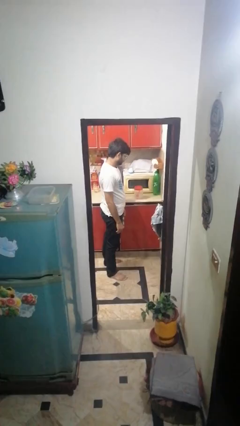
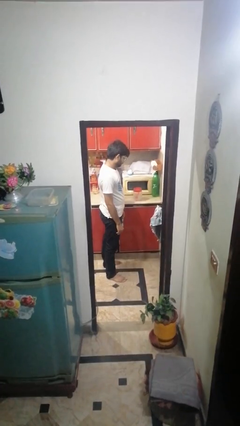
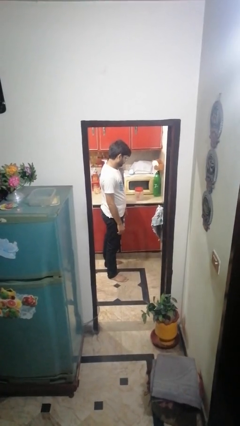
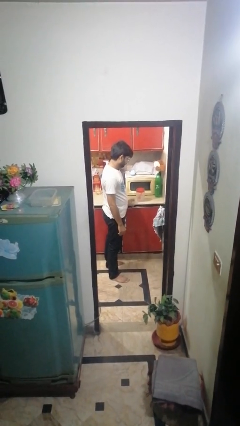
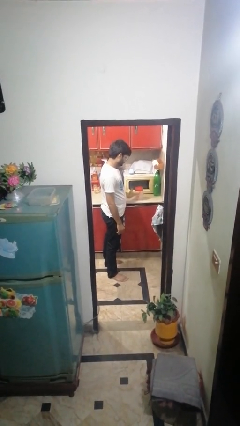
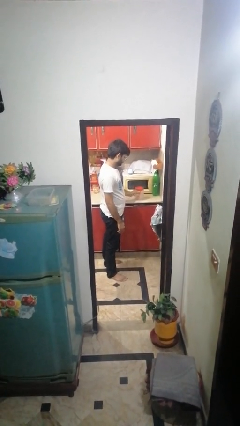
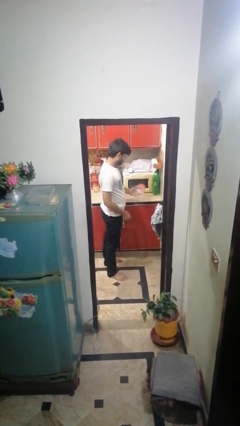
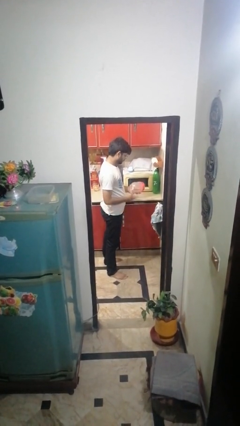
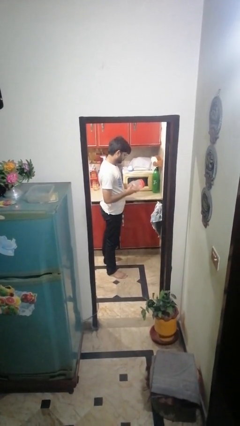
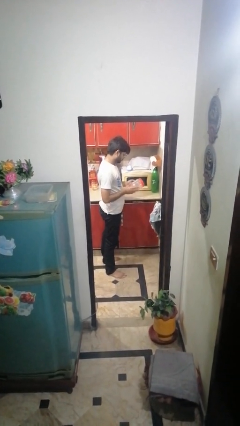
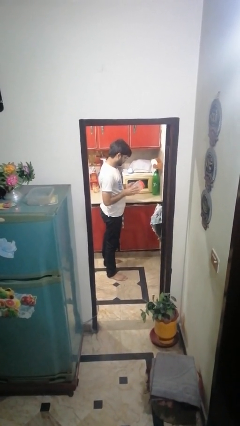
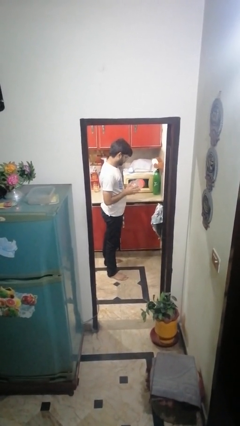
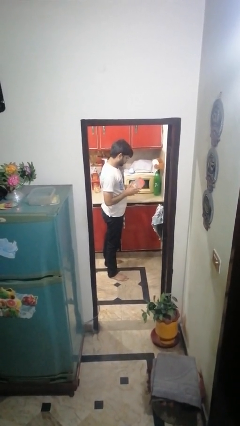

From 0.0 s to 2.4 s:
person picks up object from countertop

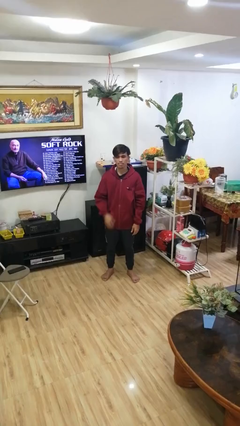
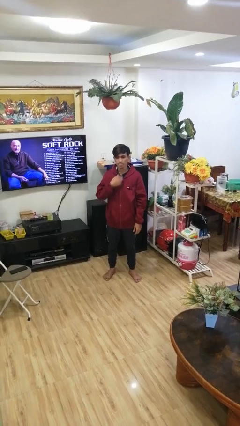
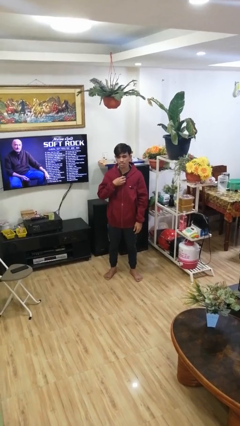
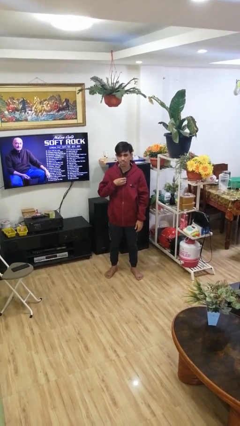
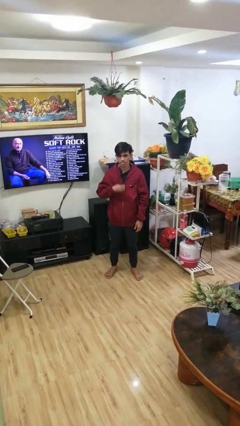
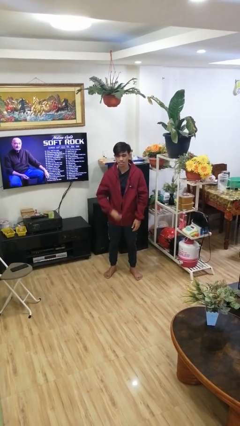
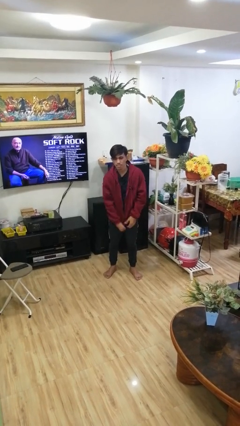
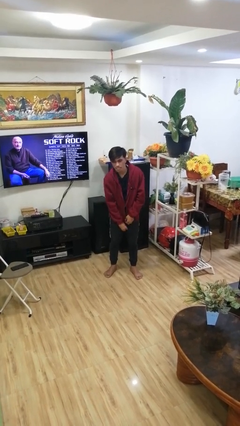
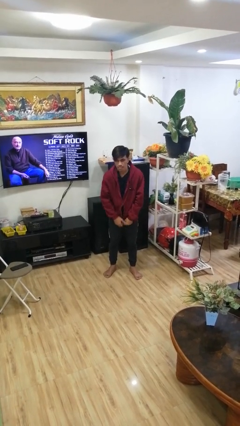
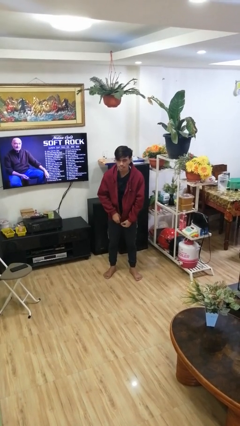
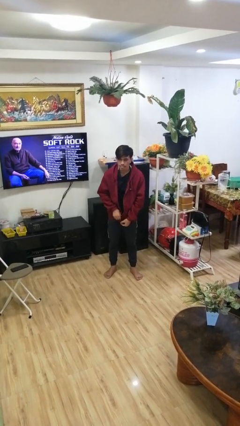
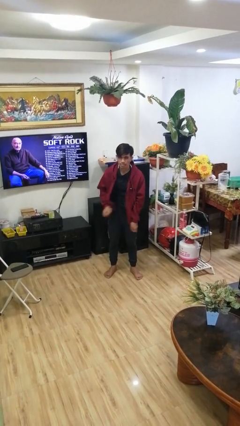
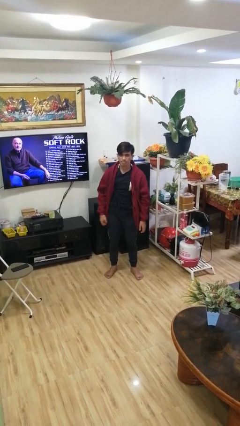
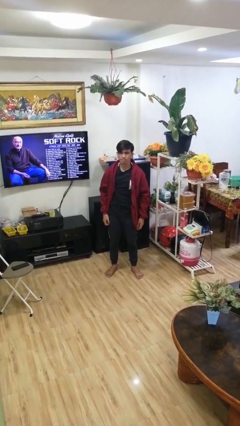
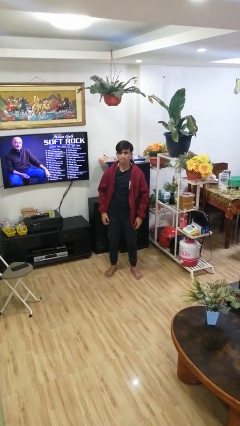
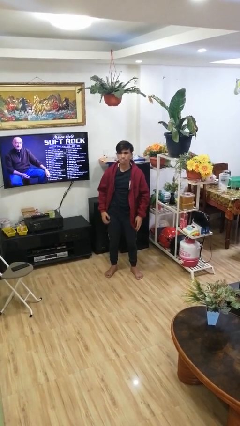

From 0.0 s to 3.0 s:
person unzips jacket

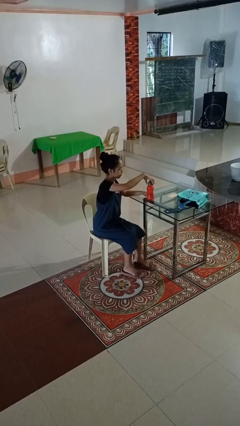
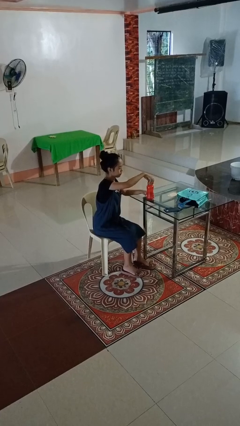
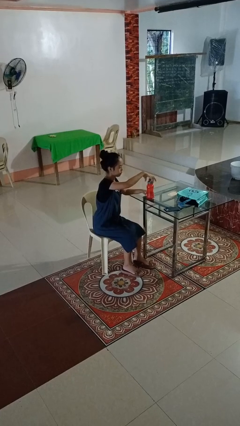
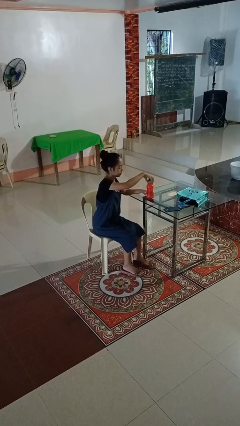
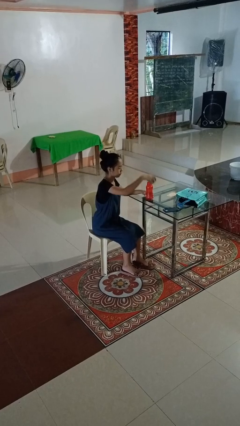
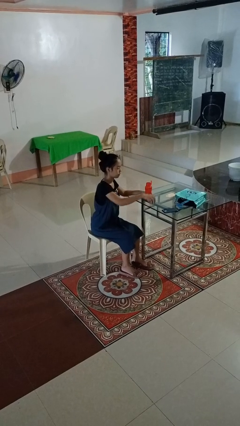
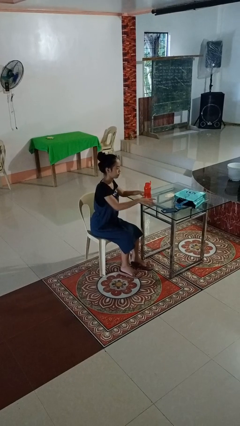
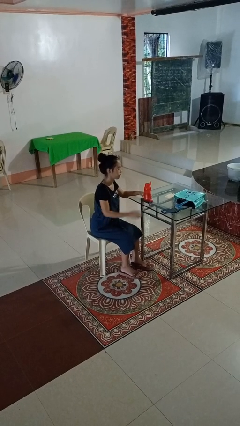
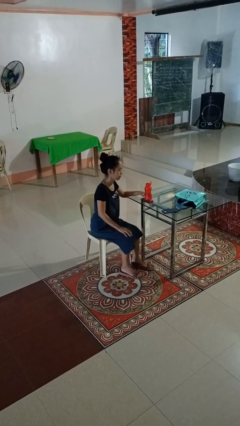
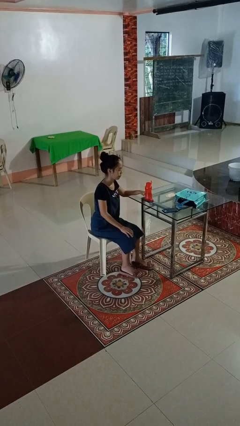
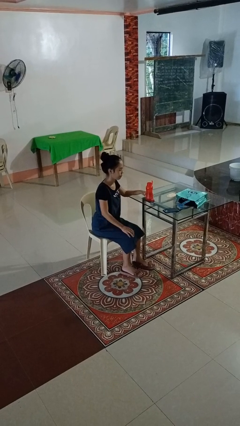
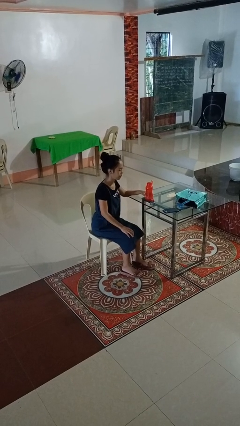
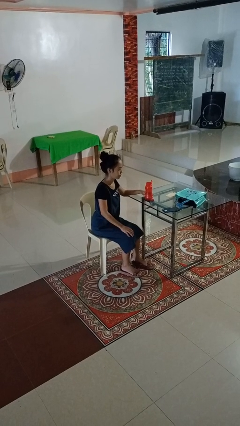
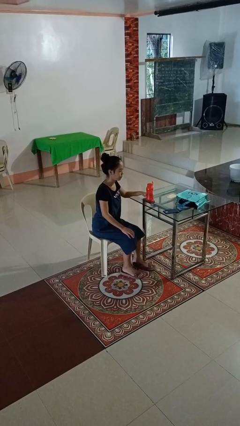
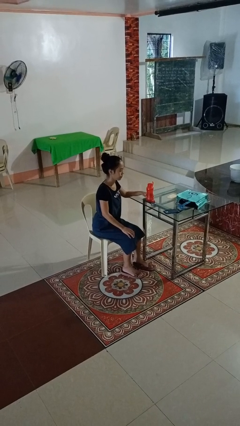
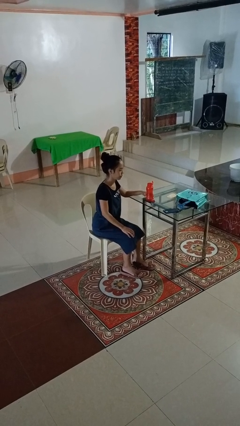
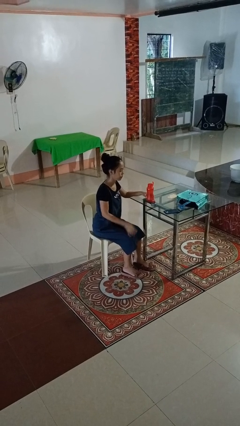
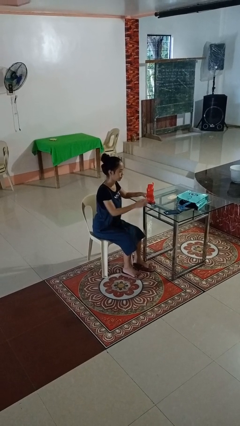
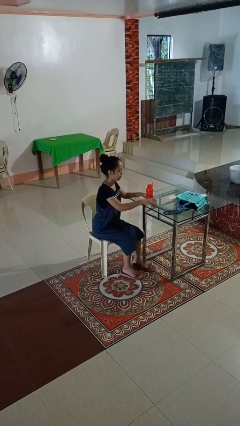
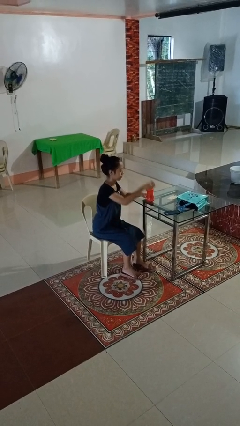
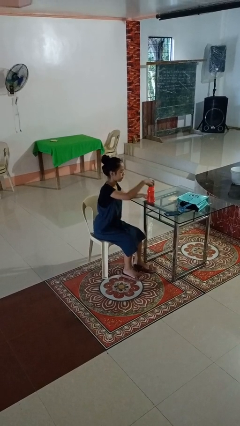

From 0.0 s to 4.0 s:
person unscrews lid from bottle

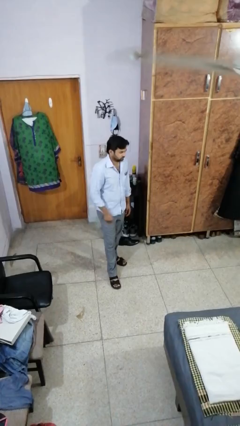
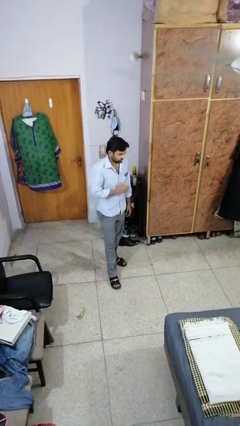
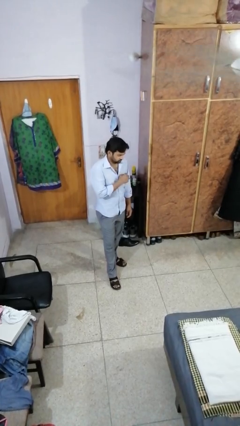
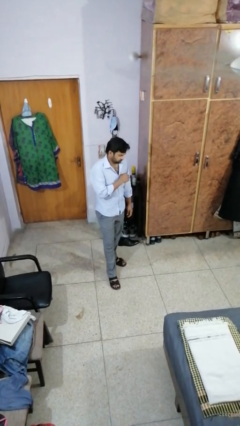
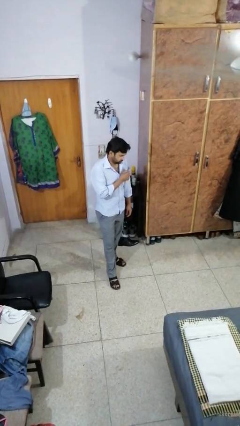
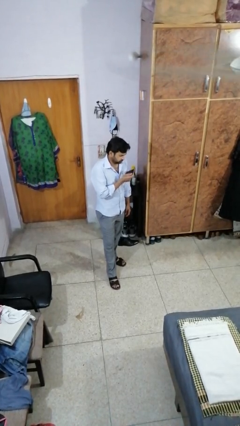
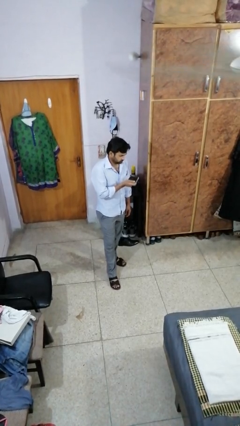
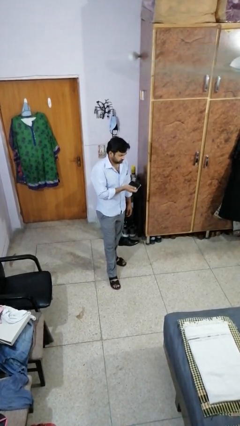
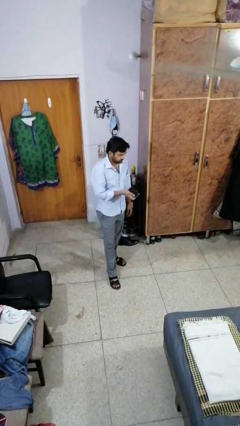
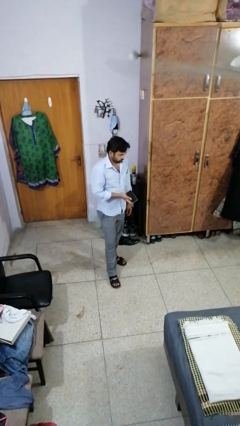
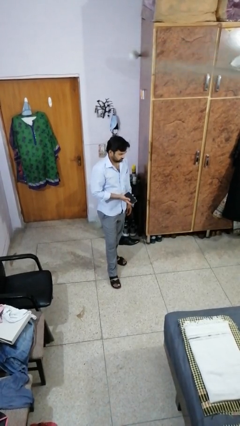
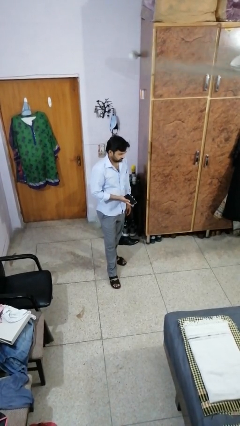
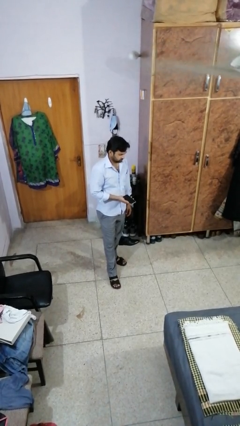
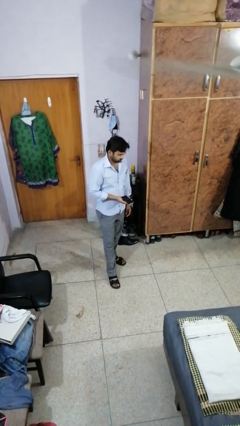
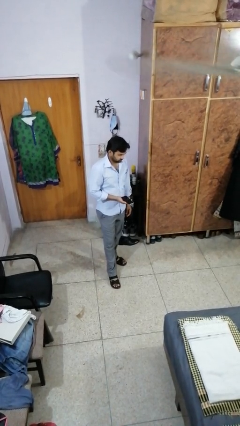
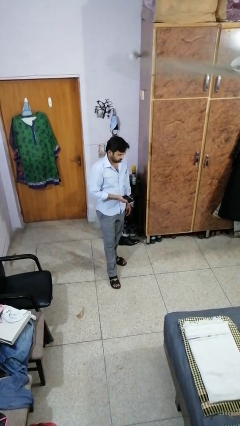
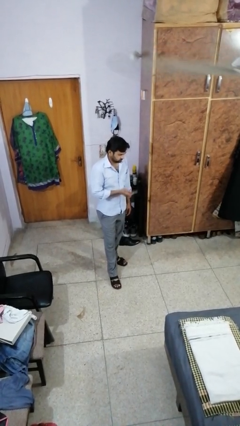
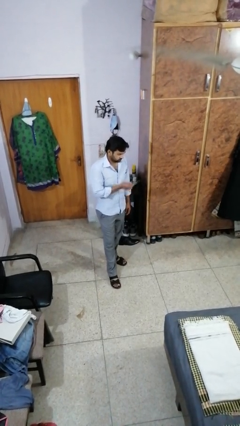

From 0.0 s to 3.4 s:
person takes phone from pocket

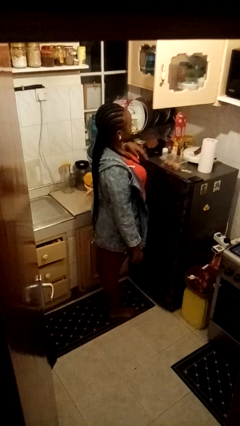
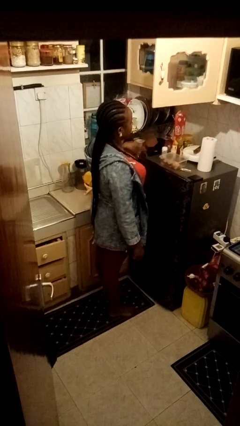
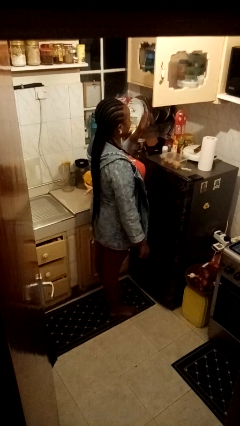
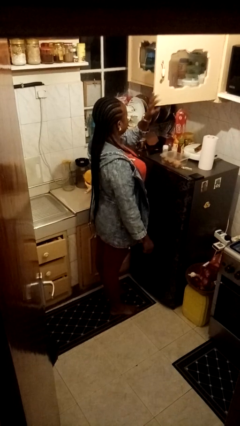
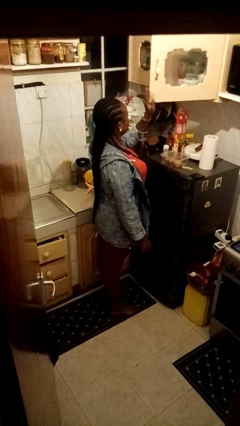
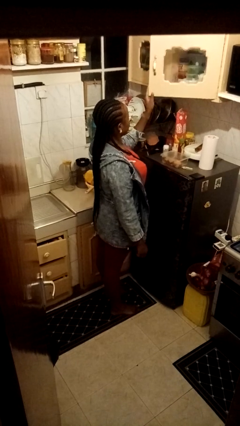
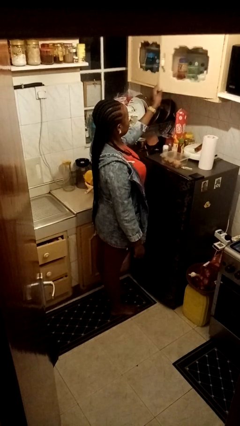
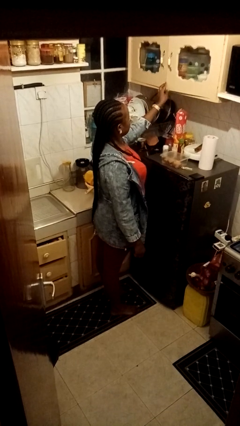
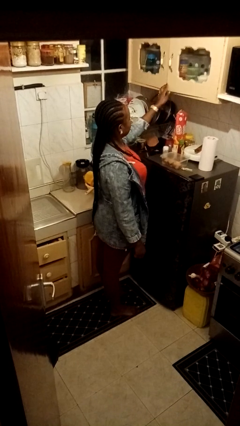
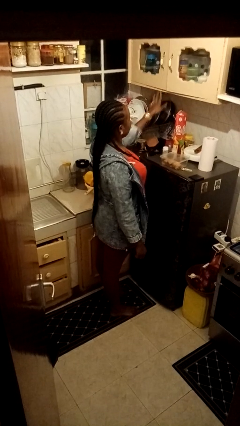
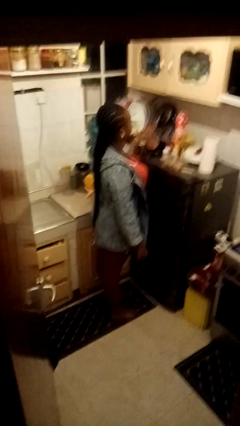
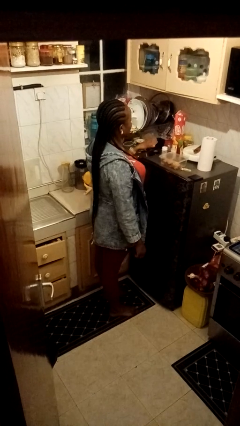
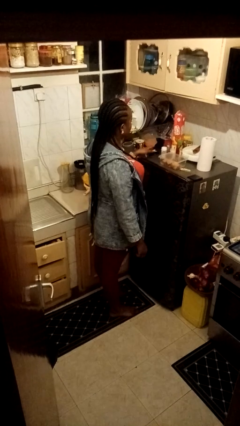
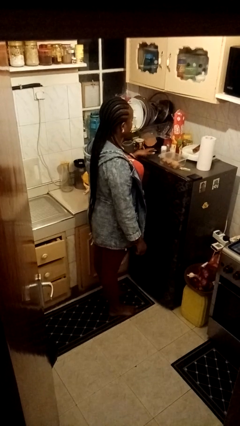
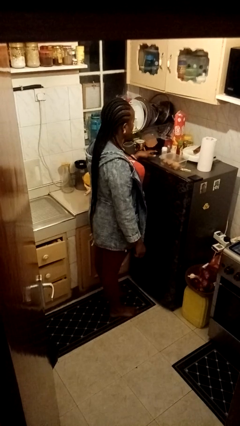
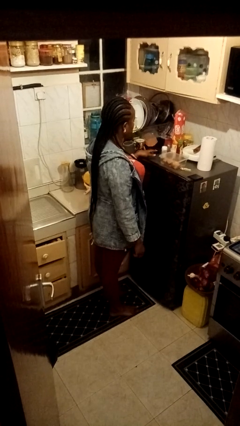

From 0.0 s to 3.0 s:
person closes cabinet

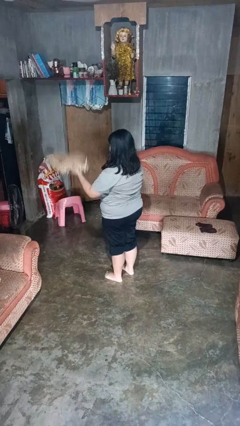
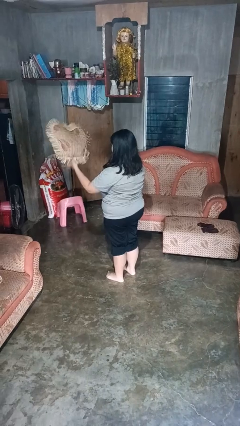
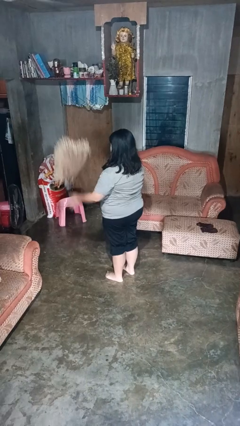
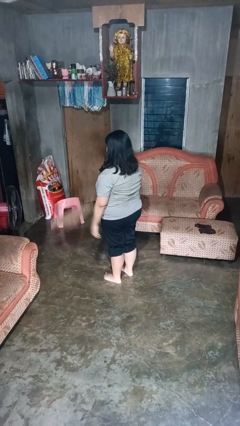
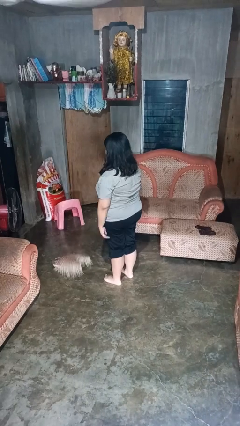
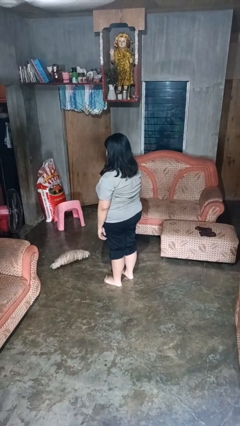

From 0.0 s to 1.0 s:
person throws object into air

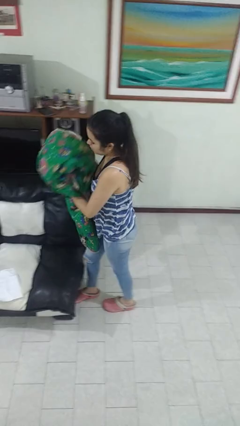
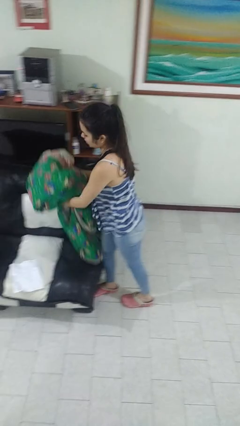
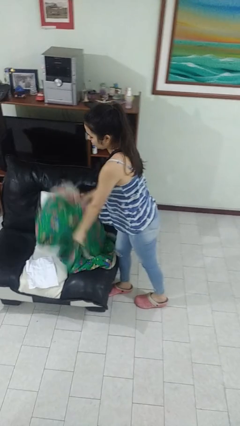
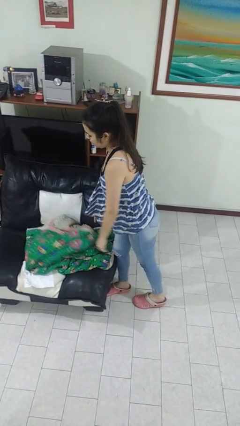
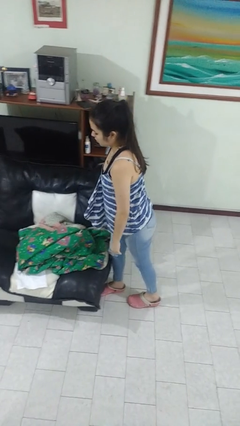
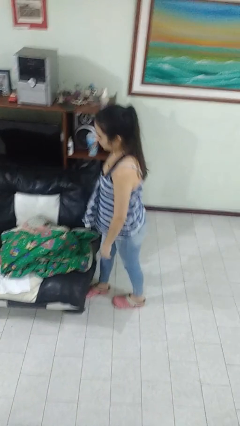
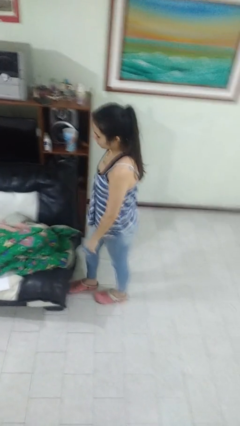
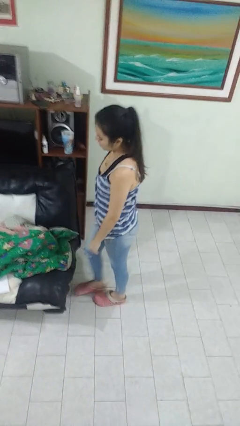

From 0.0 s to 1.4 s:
person puts down object on couch
